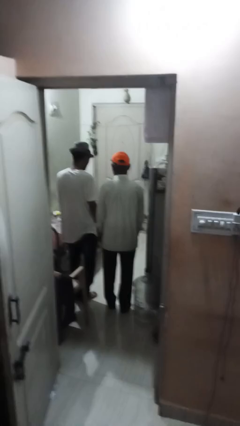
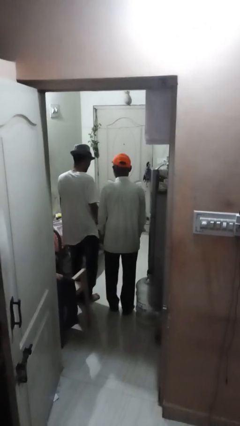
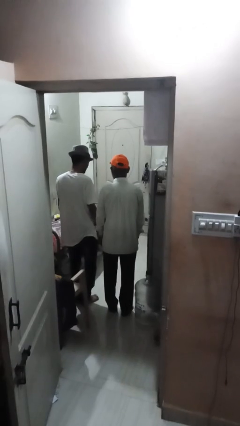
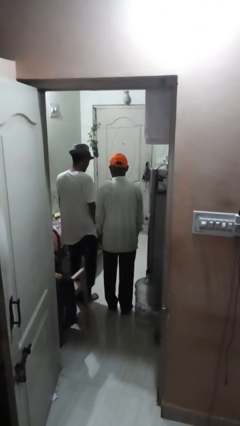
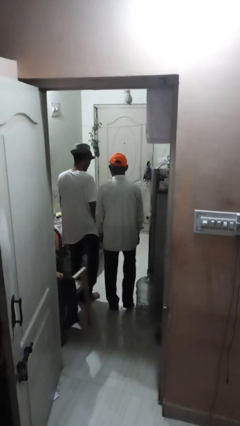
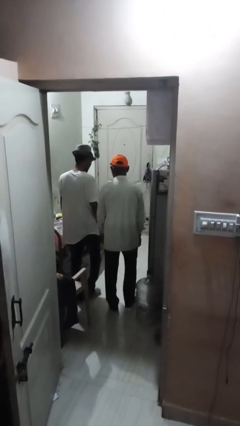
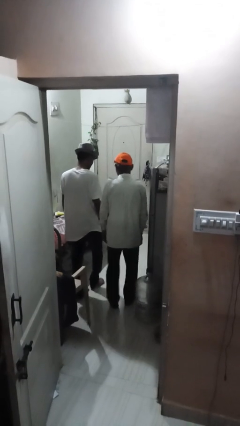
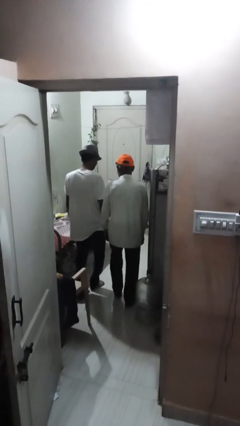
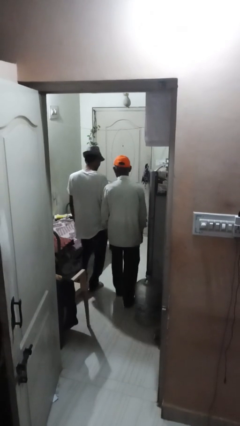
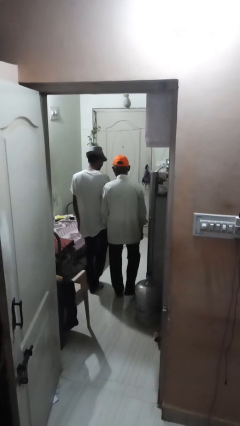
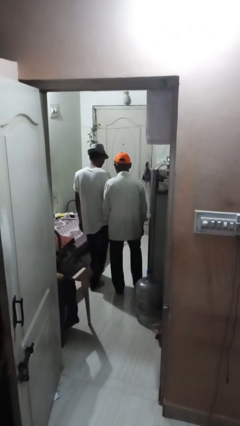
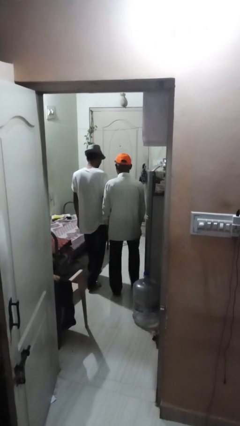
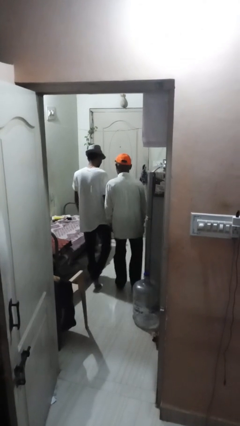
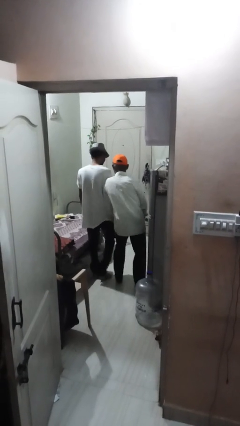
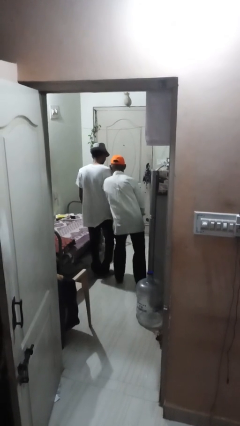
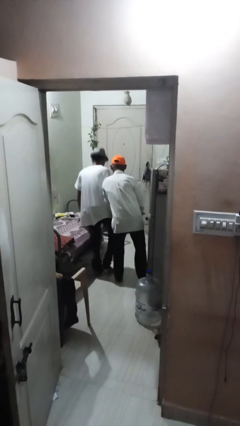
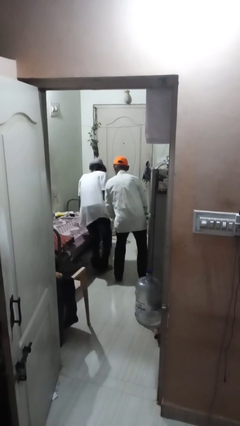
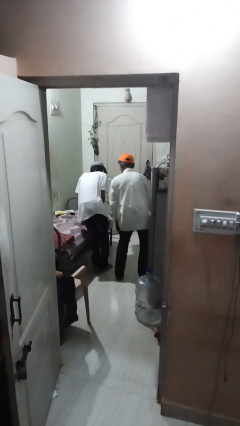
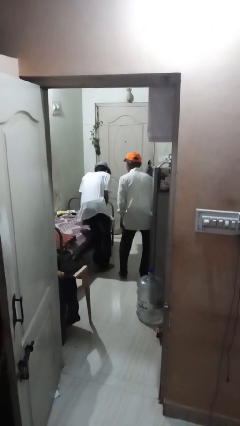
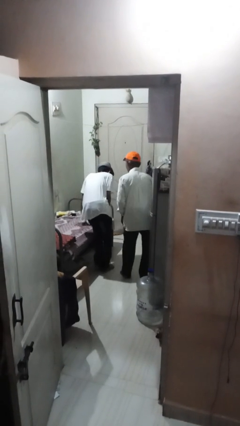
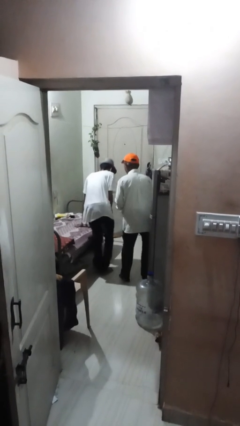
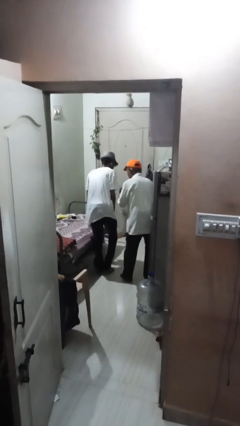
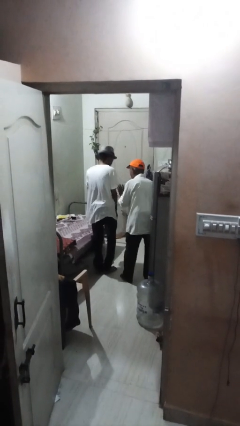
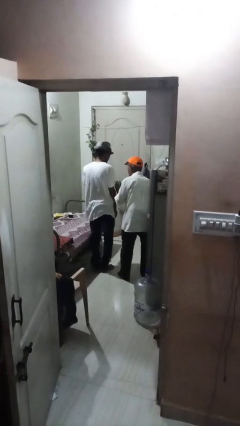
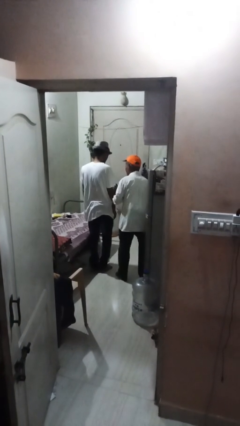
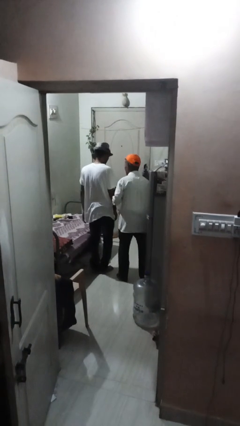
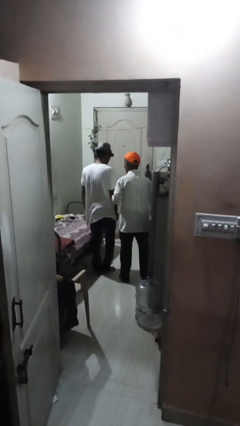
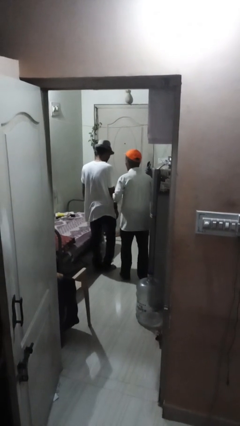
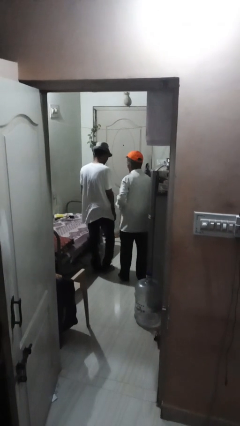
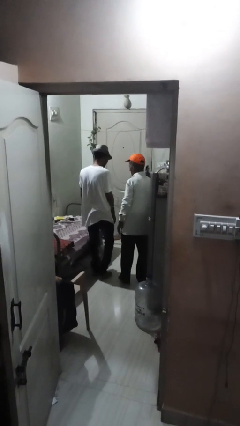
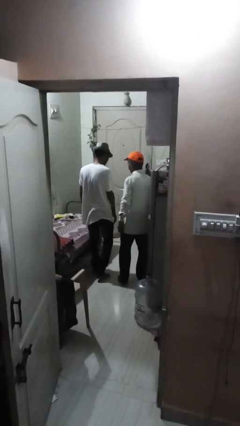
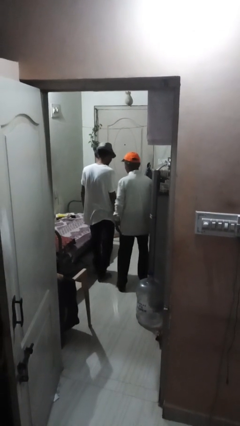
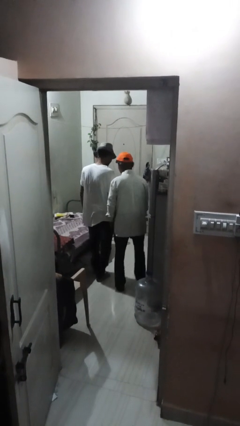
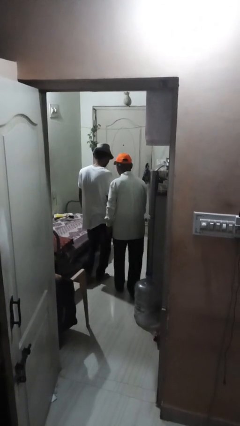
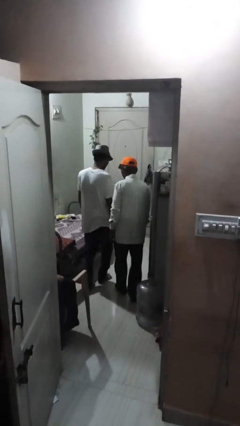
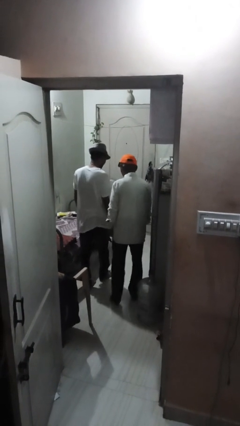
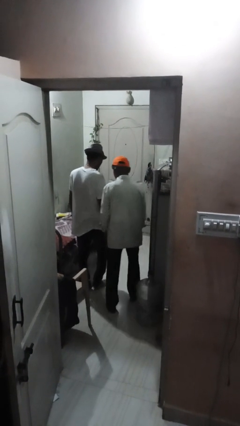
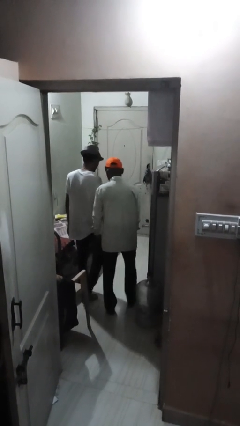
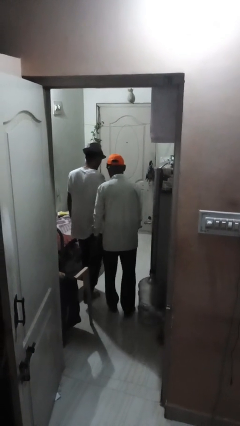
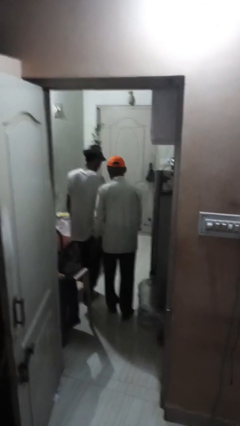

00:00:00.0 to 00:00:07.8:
person bumps into person

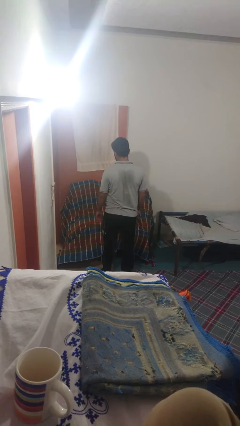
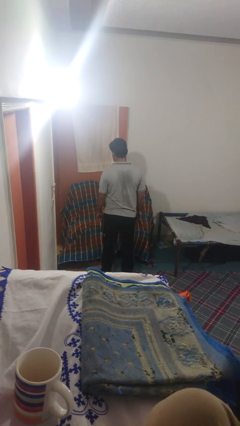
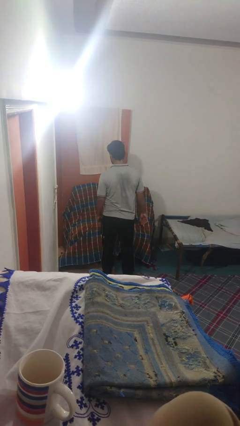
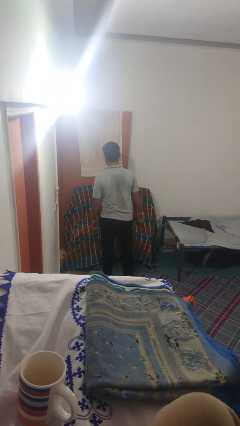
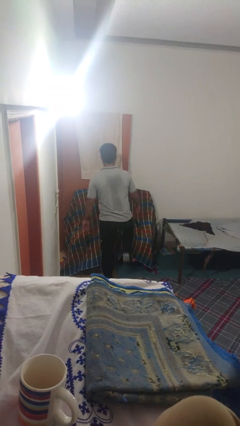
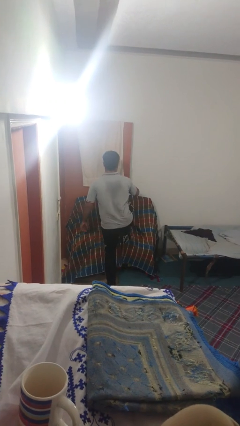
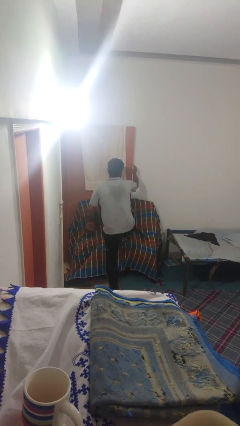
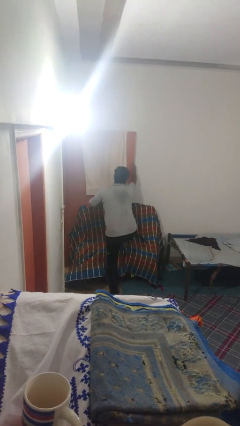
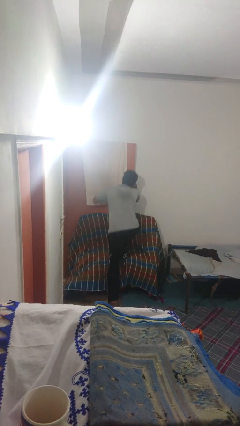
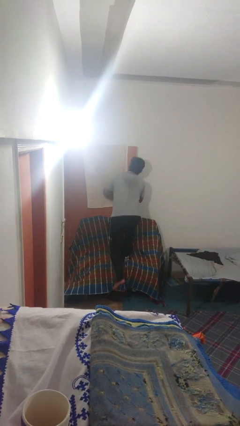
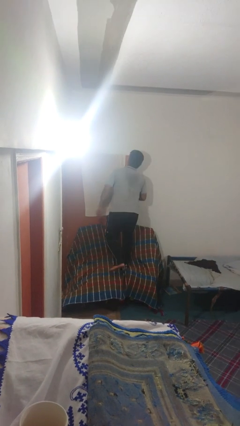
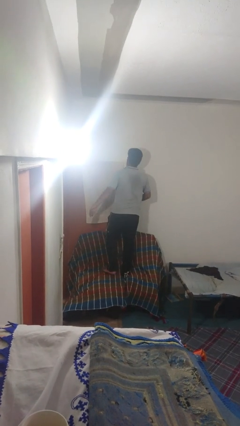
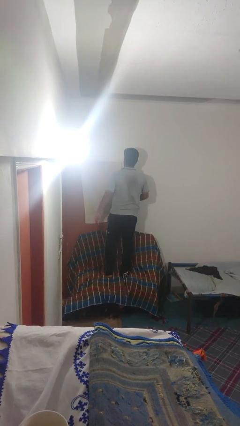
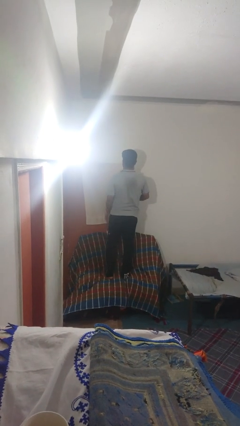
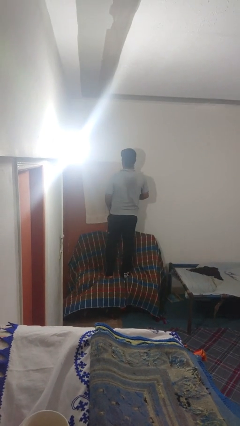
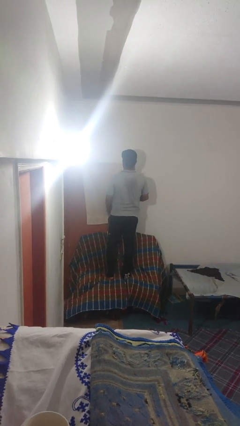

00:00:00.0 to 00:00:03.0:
person climbs on couch

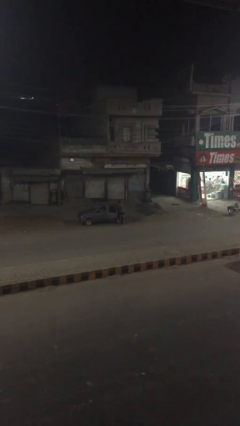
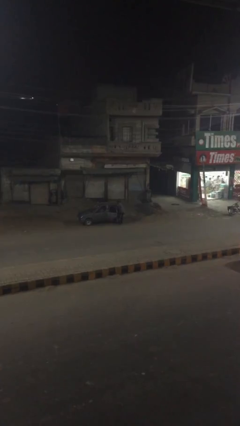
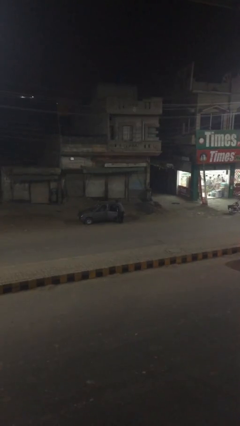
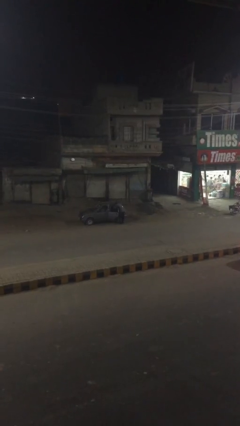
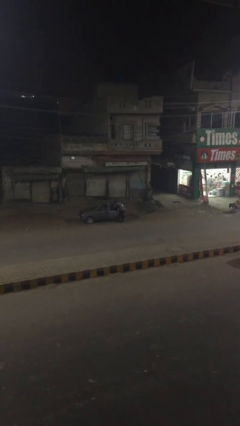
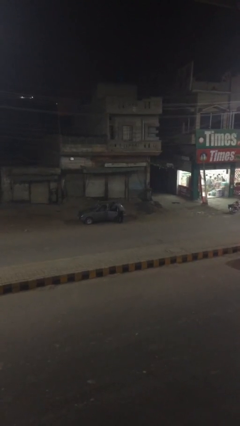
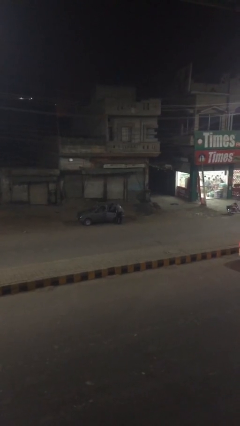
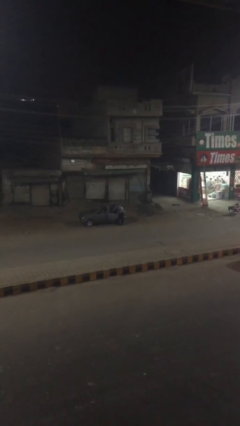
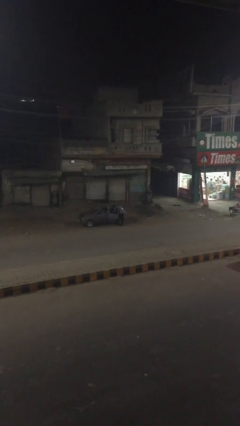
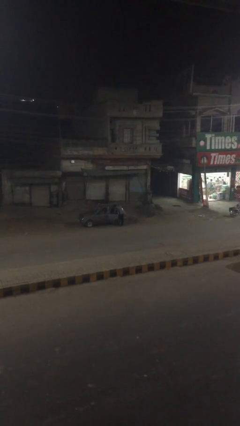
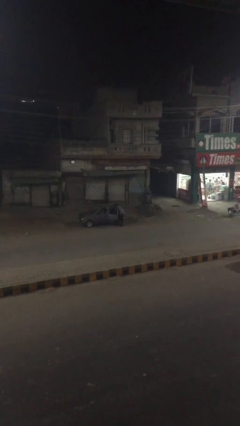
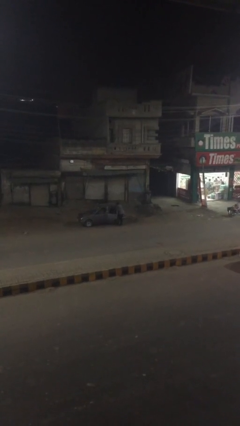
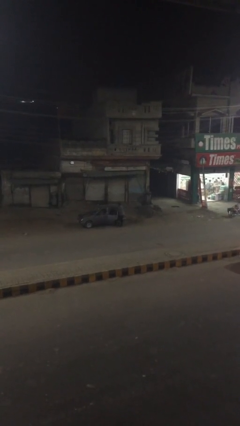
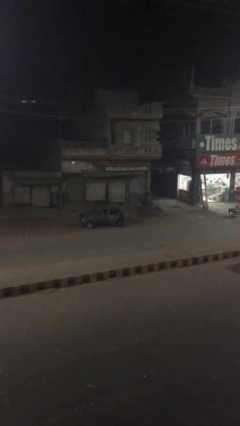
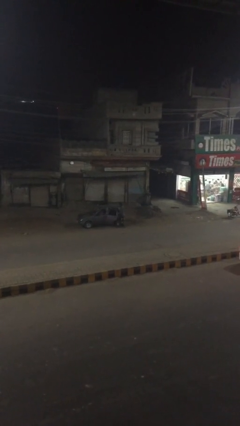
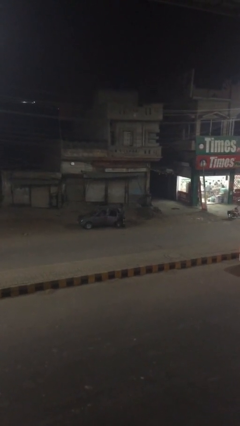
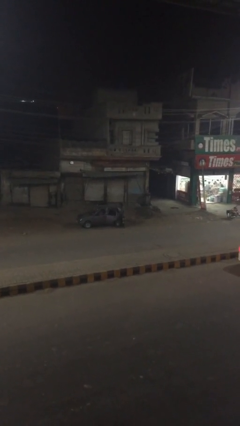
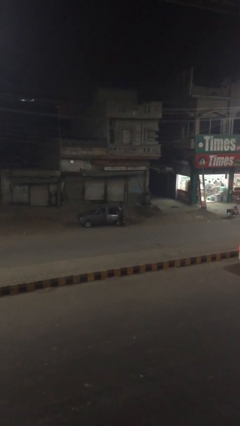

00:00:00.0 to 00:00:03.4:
person loads car

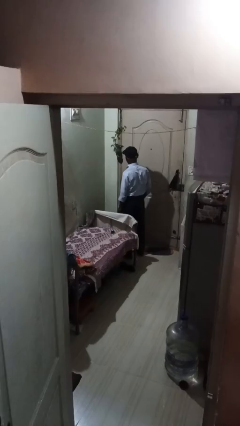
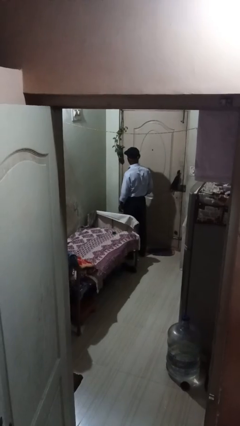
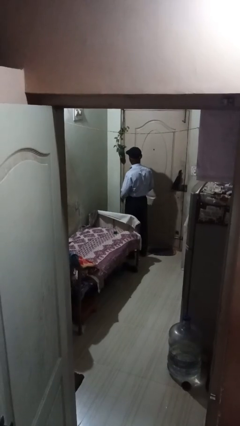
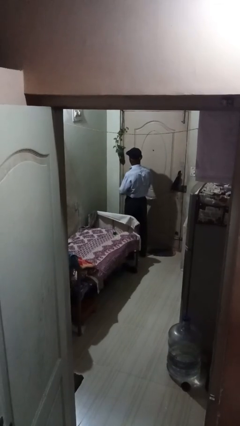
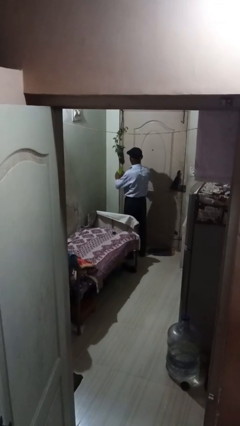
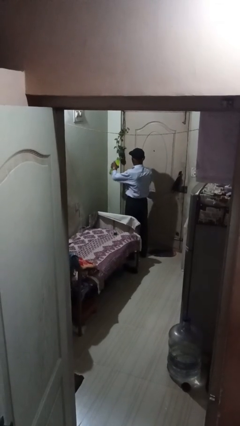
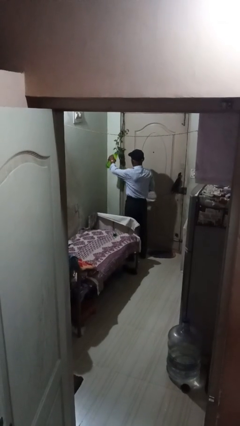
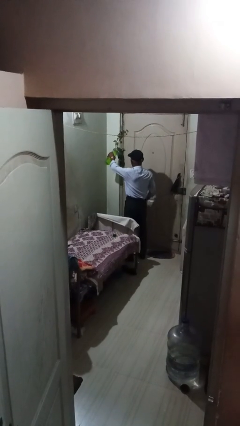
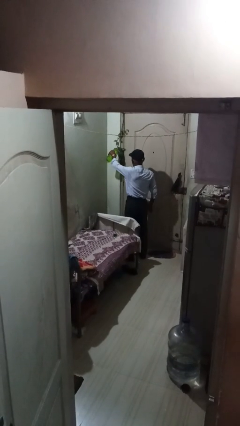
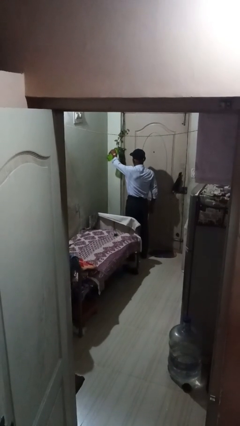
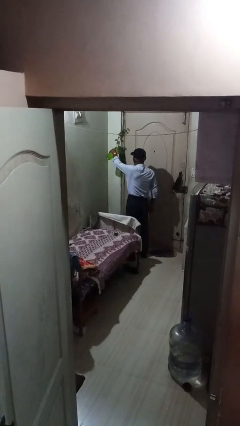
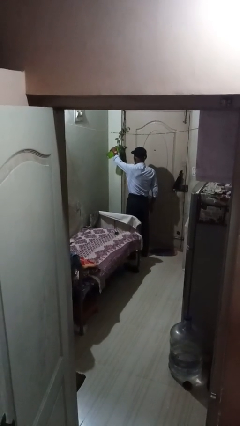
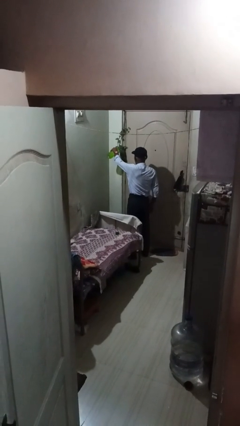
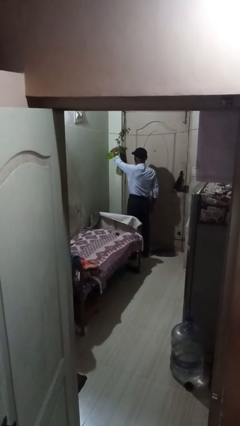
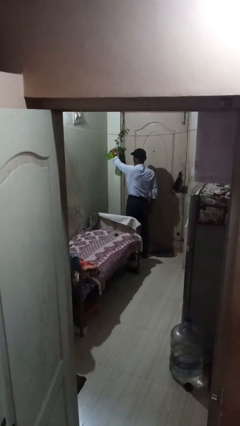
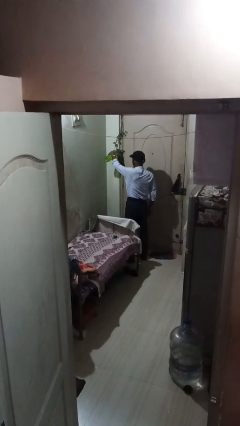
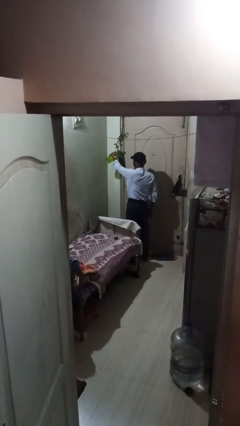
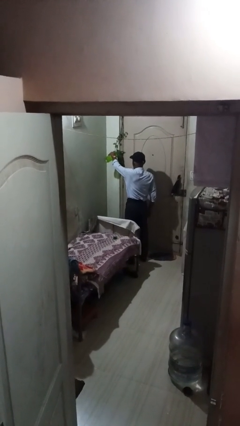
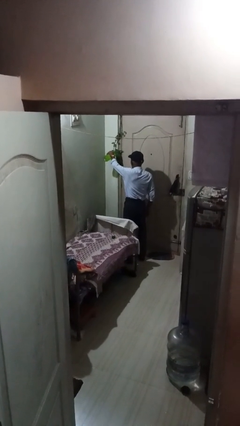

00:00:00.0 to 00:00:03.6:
person waters houseplant
